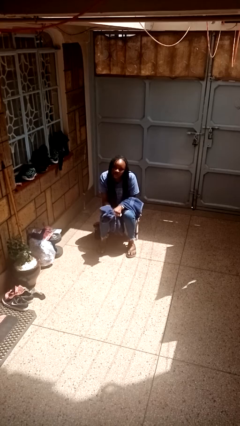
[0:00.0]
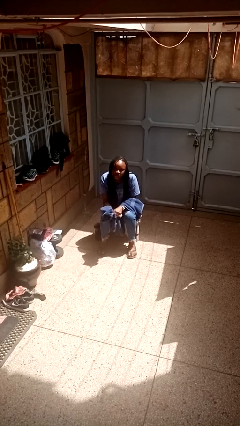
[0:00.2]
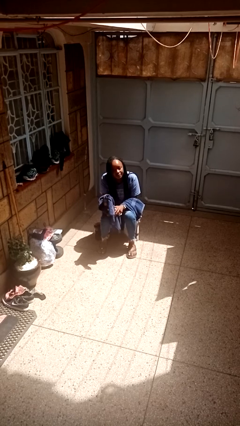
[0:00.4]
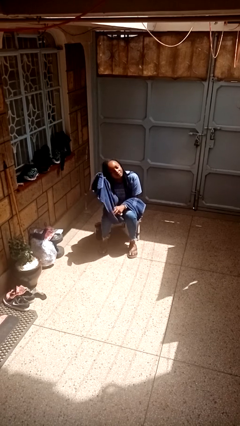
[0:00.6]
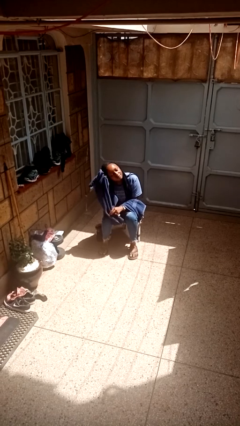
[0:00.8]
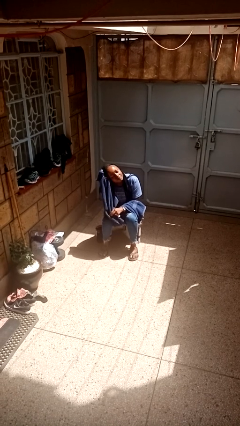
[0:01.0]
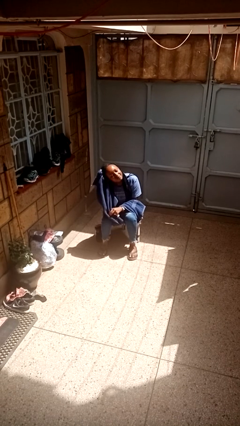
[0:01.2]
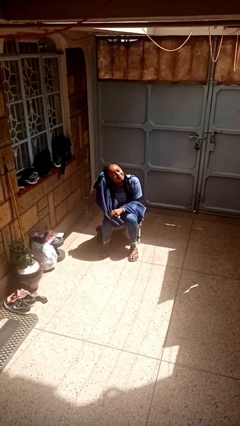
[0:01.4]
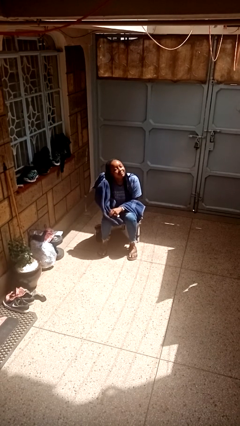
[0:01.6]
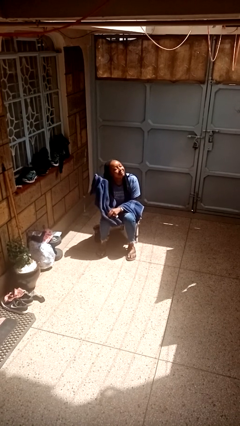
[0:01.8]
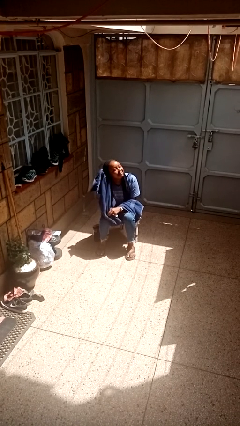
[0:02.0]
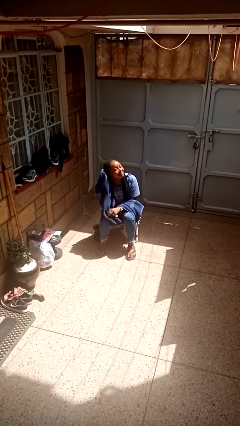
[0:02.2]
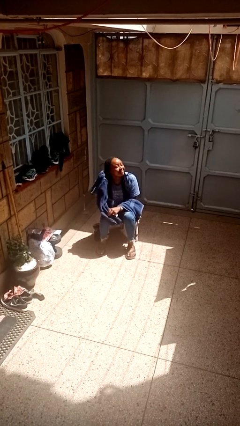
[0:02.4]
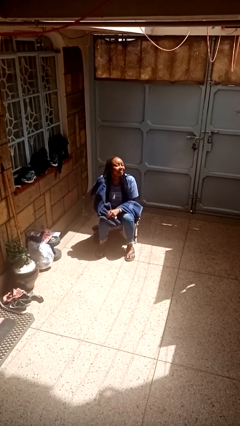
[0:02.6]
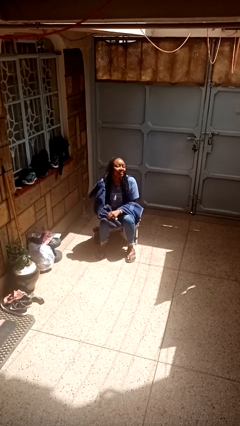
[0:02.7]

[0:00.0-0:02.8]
person dries hair with towel

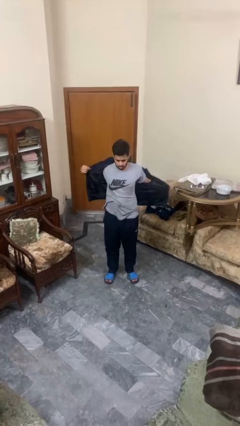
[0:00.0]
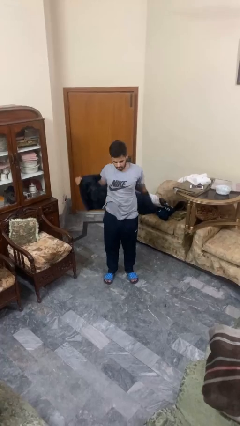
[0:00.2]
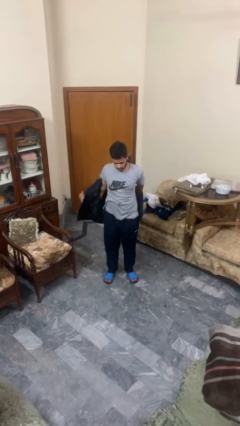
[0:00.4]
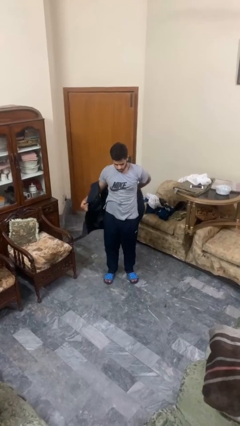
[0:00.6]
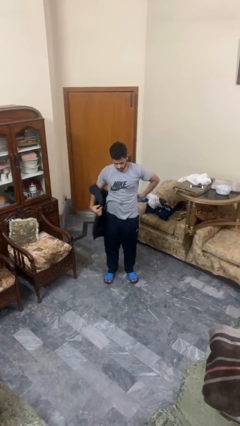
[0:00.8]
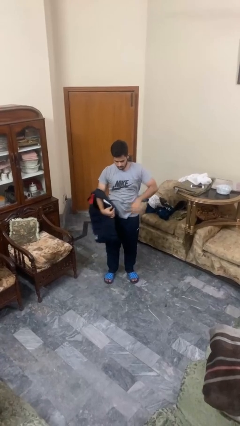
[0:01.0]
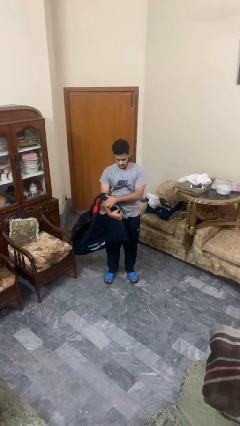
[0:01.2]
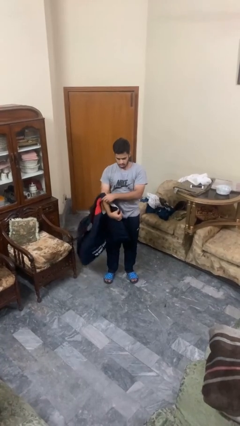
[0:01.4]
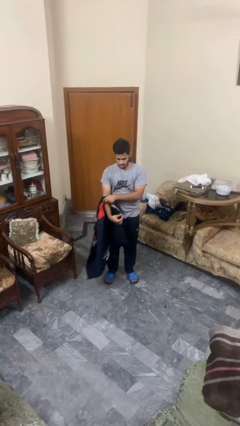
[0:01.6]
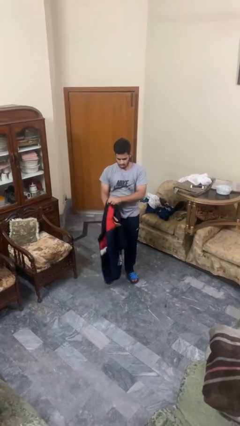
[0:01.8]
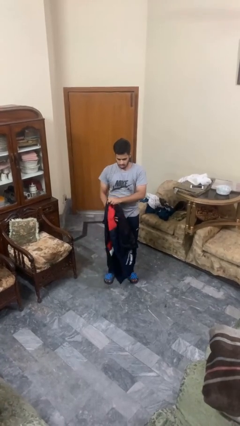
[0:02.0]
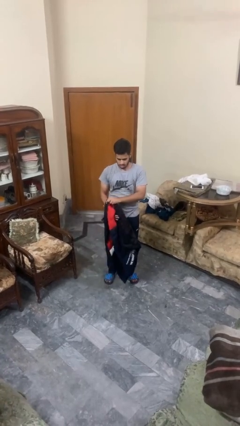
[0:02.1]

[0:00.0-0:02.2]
person takes off jacket

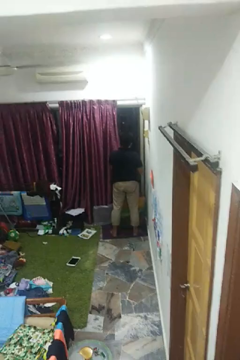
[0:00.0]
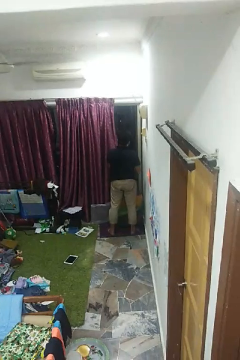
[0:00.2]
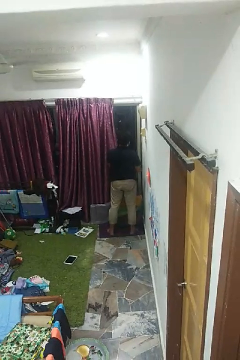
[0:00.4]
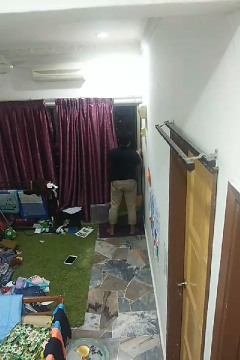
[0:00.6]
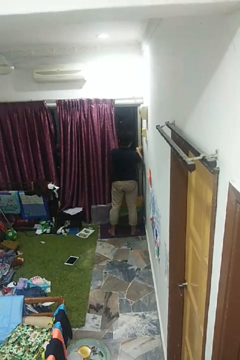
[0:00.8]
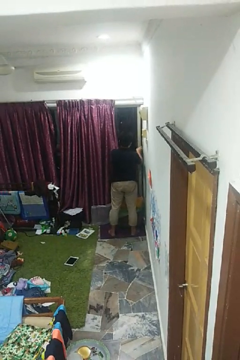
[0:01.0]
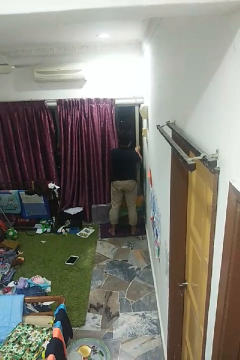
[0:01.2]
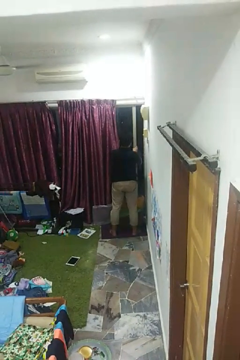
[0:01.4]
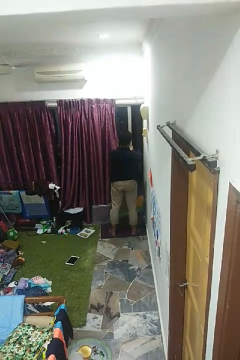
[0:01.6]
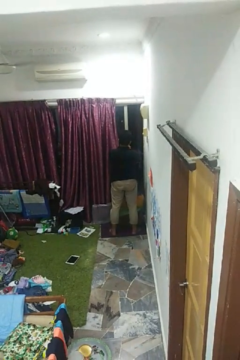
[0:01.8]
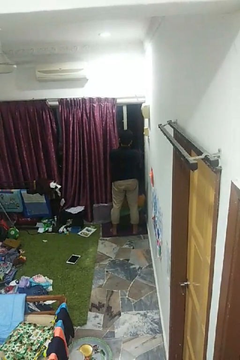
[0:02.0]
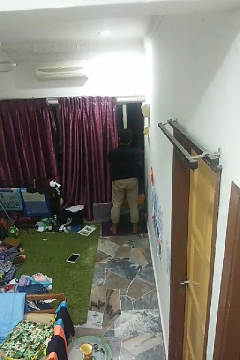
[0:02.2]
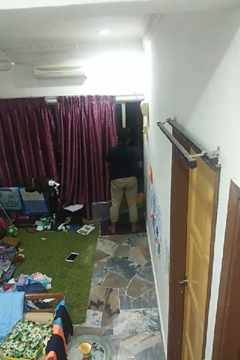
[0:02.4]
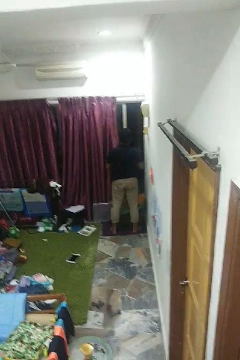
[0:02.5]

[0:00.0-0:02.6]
person opens home window

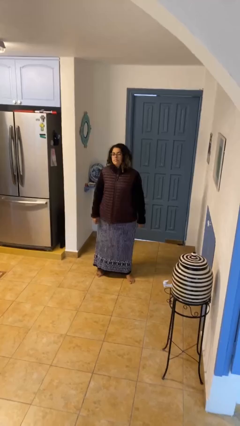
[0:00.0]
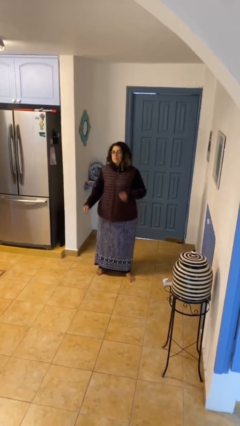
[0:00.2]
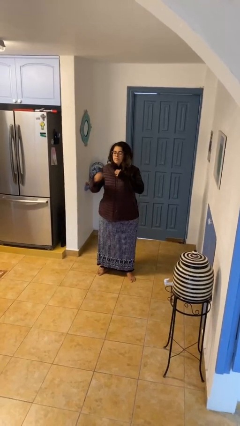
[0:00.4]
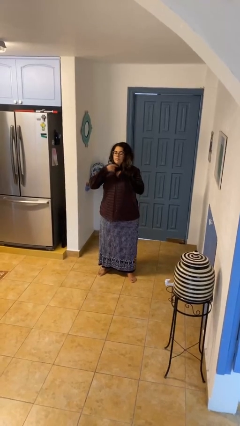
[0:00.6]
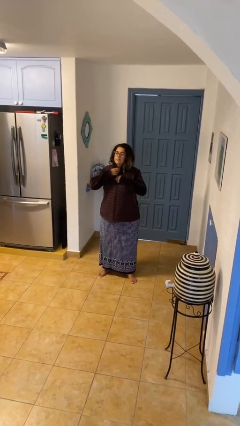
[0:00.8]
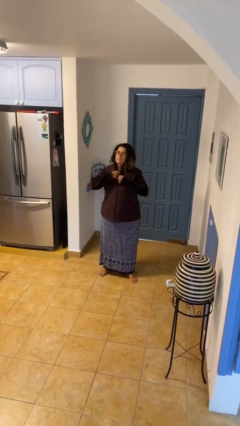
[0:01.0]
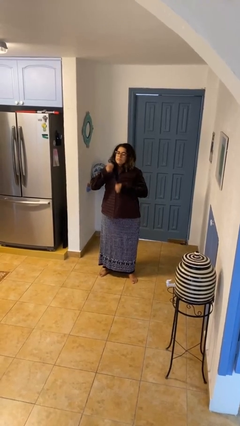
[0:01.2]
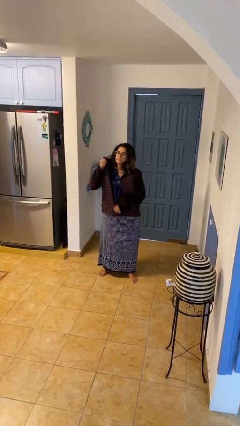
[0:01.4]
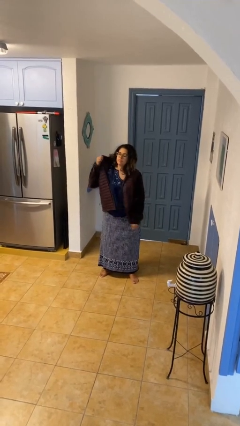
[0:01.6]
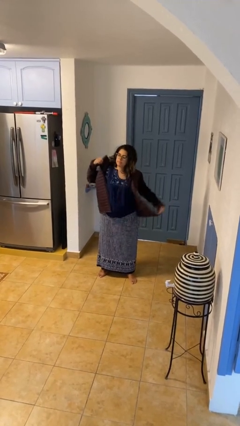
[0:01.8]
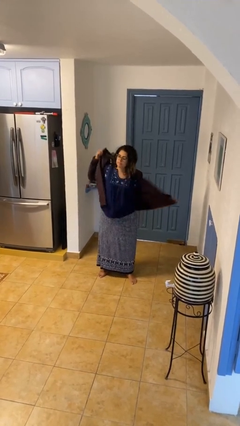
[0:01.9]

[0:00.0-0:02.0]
person unzips jacket

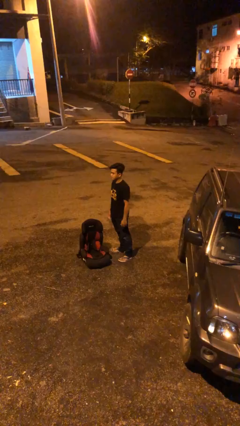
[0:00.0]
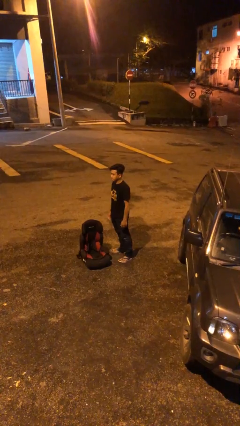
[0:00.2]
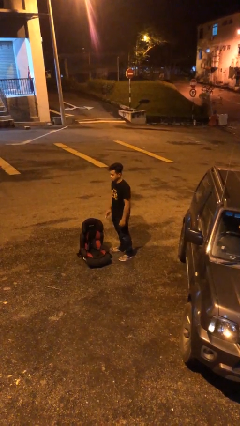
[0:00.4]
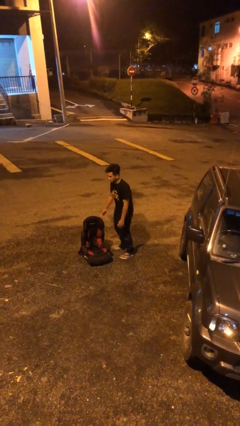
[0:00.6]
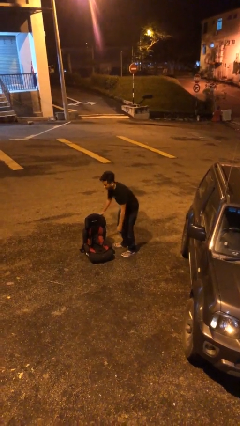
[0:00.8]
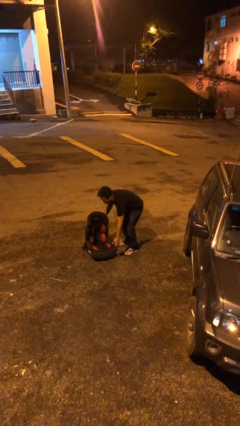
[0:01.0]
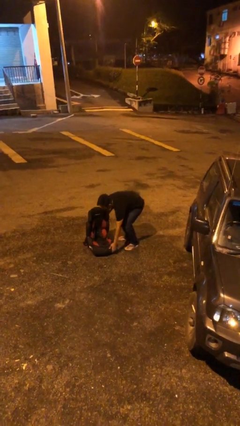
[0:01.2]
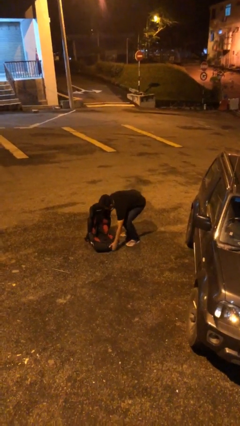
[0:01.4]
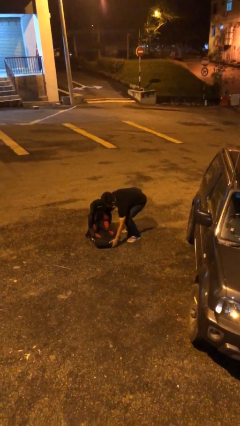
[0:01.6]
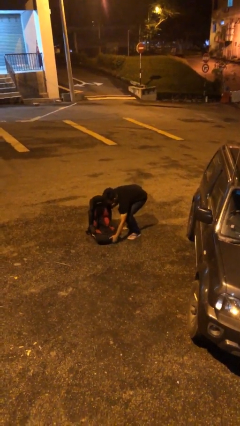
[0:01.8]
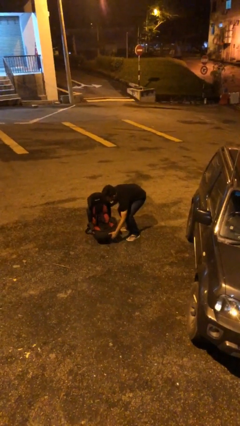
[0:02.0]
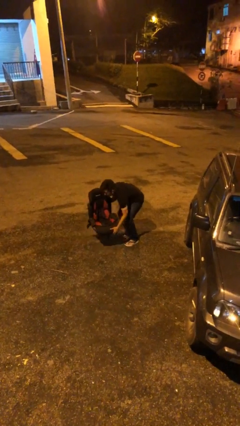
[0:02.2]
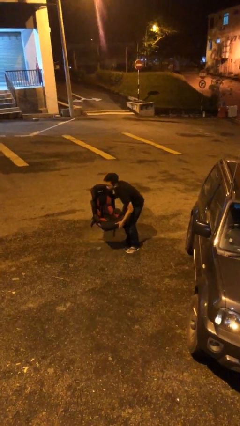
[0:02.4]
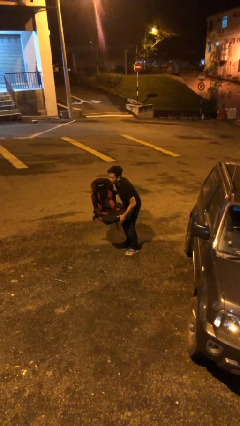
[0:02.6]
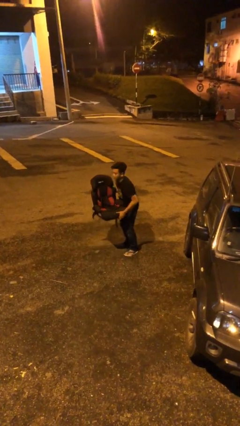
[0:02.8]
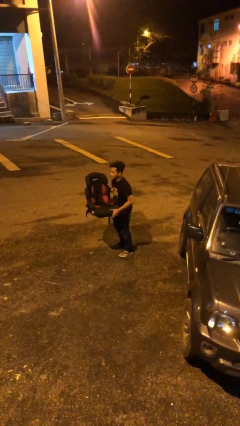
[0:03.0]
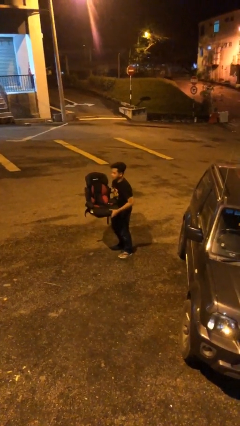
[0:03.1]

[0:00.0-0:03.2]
person picks up object from floor

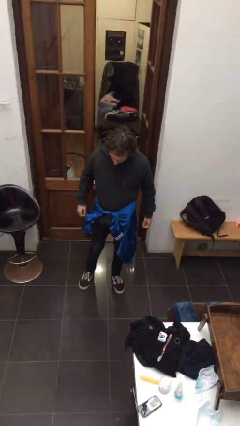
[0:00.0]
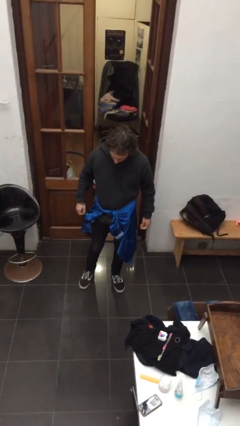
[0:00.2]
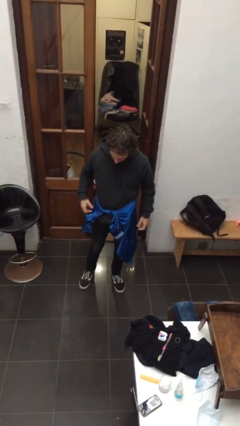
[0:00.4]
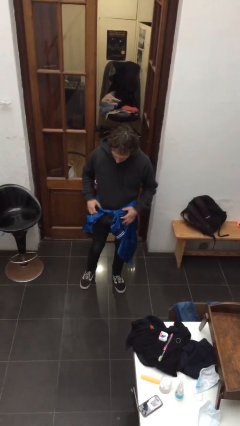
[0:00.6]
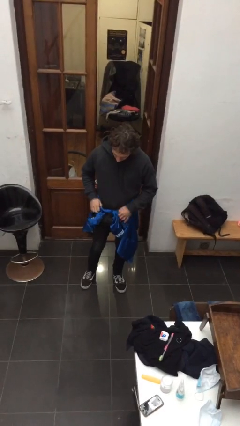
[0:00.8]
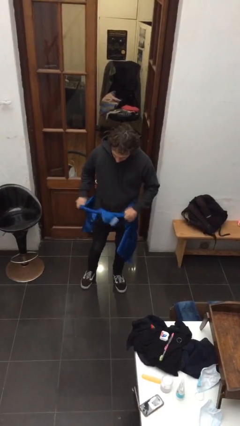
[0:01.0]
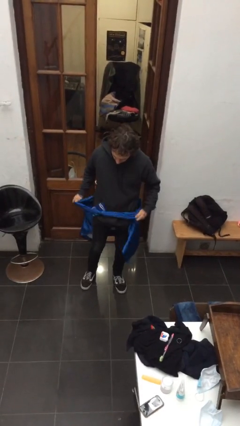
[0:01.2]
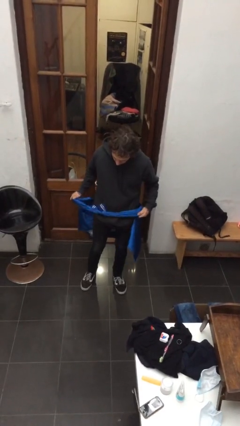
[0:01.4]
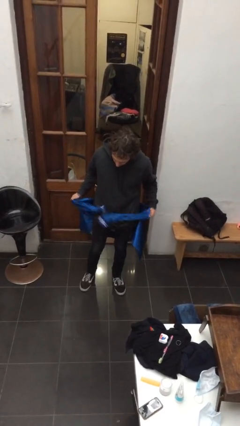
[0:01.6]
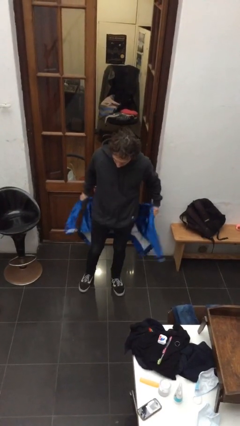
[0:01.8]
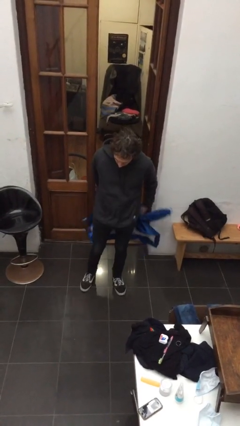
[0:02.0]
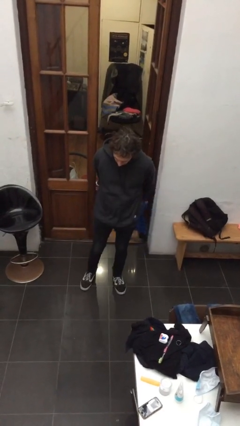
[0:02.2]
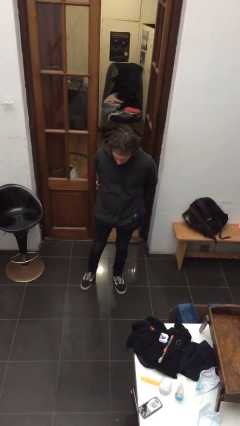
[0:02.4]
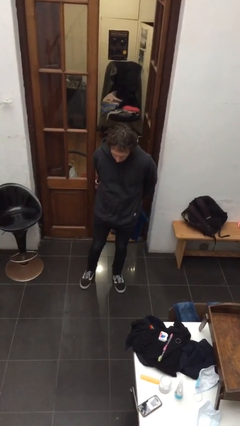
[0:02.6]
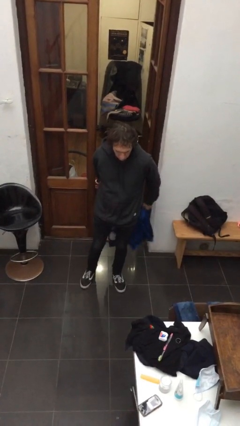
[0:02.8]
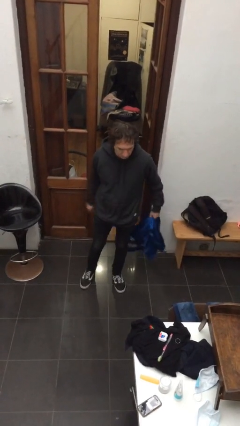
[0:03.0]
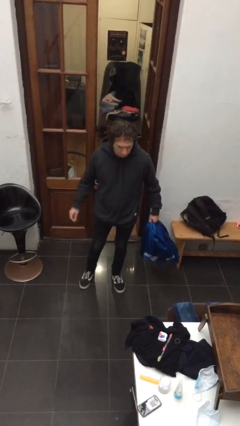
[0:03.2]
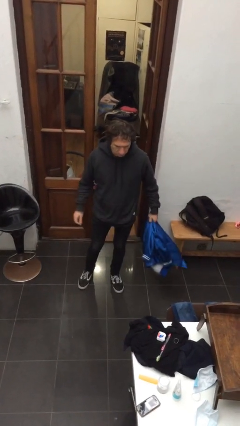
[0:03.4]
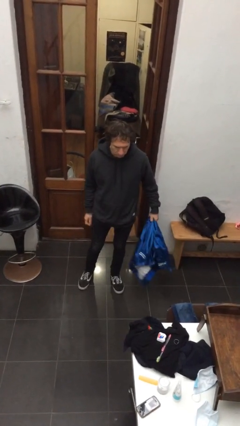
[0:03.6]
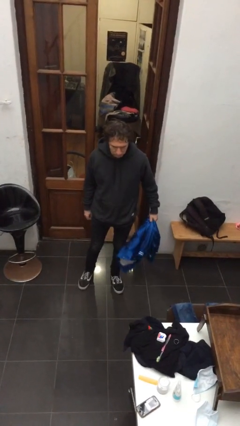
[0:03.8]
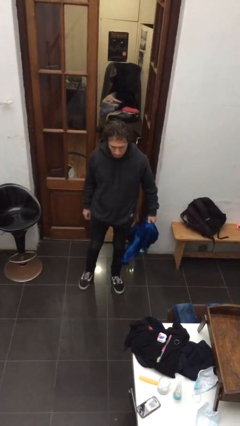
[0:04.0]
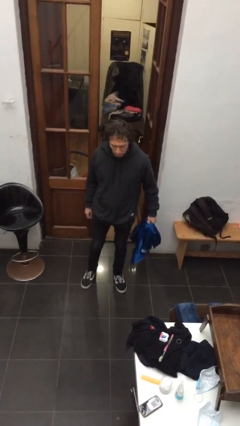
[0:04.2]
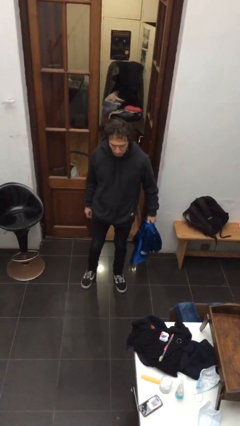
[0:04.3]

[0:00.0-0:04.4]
person unties jacket around waist

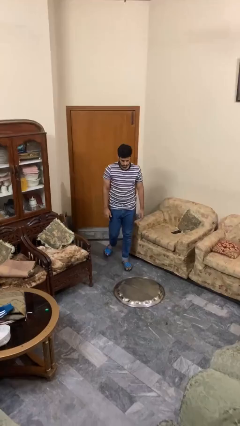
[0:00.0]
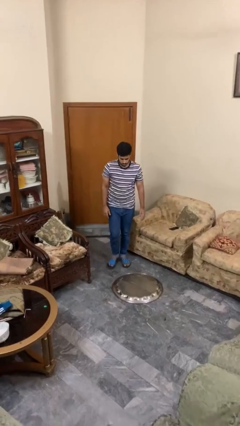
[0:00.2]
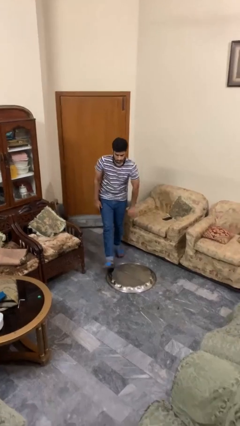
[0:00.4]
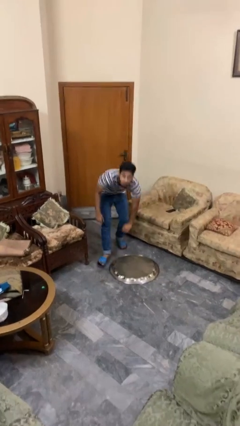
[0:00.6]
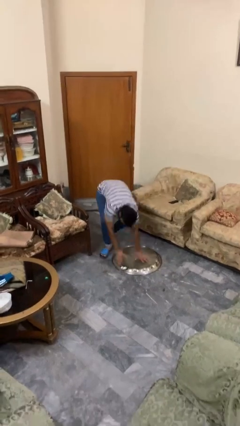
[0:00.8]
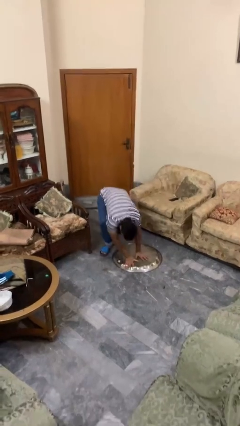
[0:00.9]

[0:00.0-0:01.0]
person trips on object on floor
